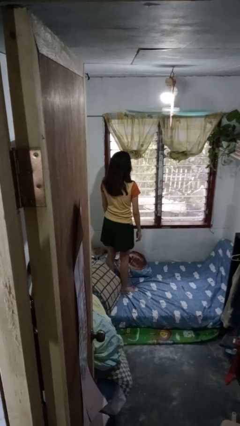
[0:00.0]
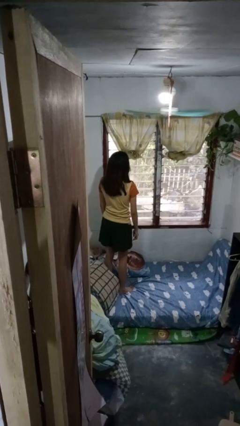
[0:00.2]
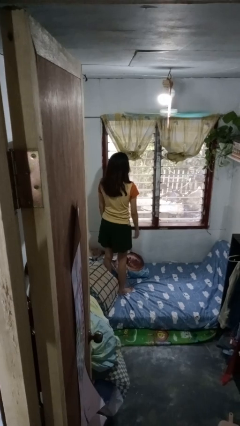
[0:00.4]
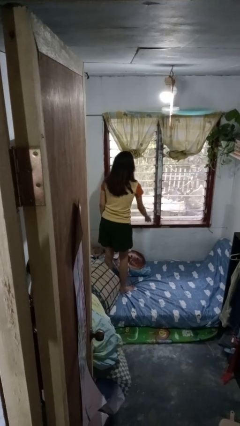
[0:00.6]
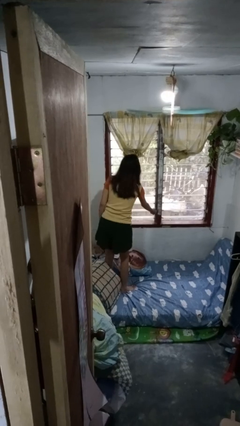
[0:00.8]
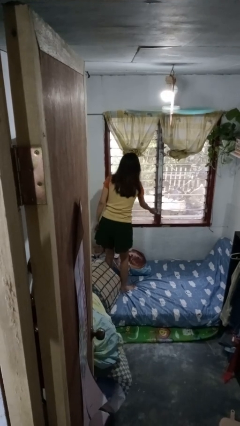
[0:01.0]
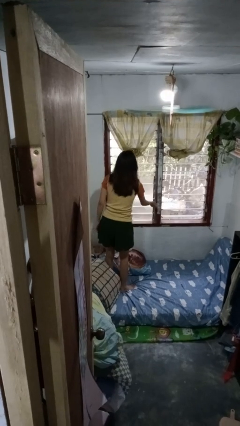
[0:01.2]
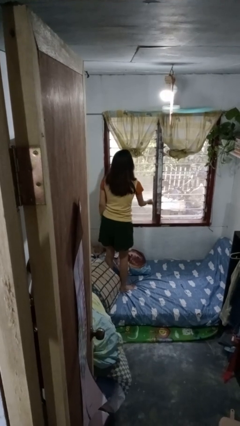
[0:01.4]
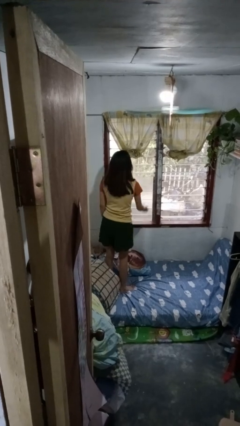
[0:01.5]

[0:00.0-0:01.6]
person closes home window

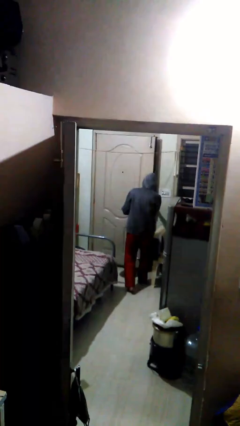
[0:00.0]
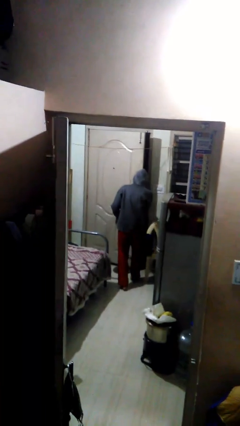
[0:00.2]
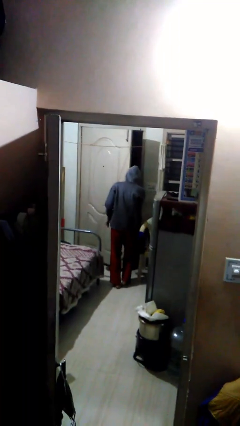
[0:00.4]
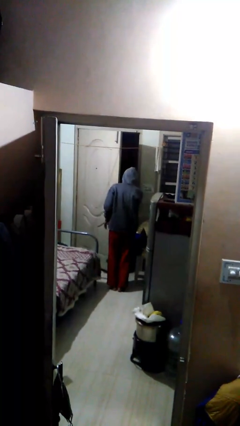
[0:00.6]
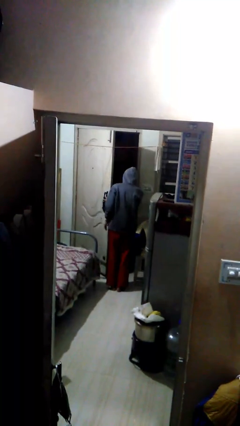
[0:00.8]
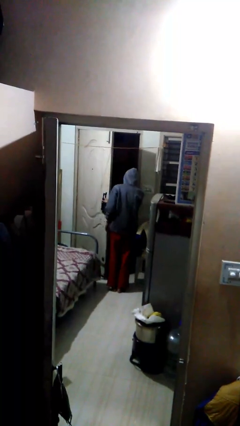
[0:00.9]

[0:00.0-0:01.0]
person opens facility door

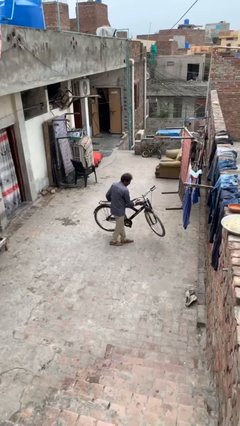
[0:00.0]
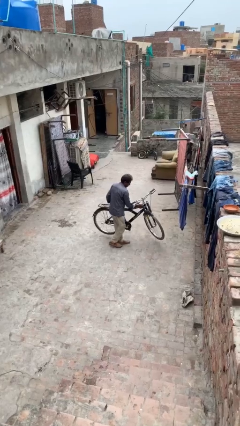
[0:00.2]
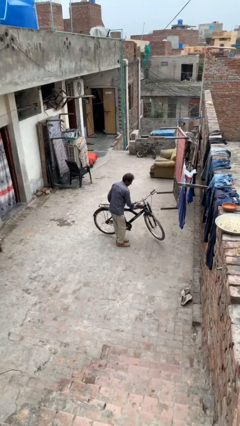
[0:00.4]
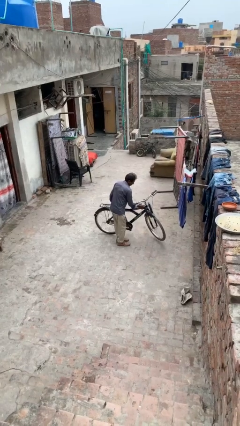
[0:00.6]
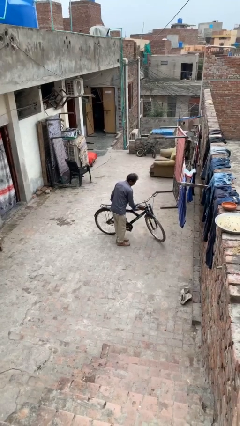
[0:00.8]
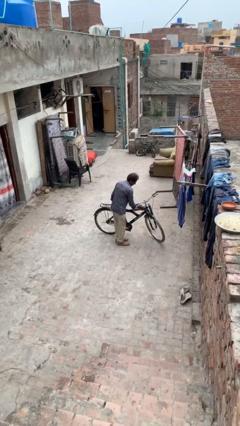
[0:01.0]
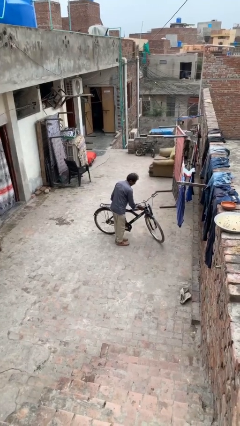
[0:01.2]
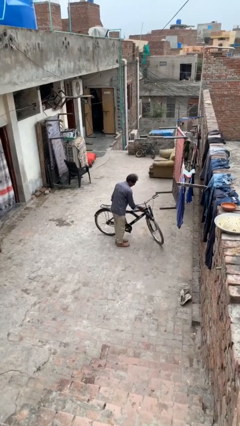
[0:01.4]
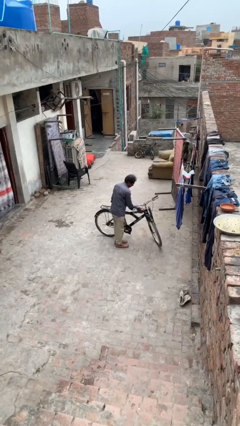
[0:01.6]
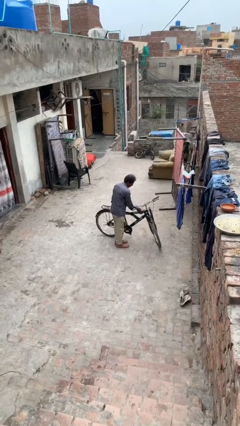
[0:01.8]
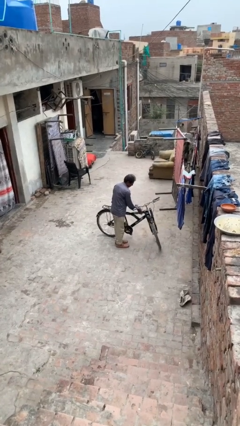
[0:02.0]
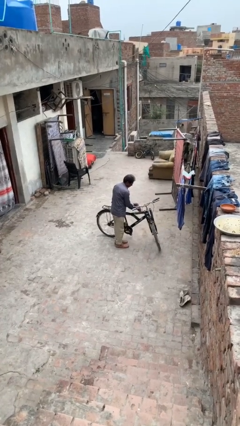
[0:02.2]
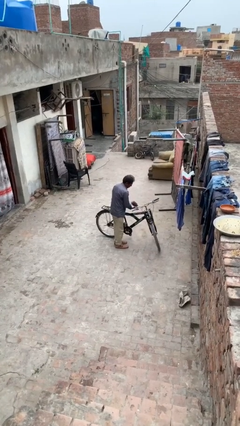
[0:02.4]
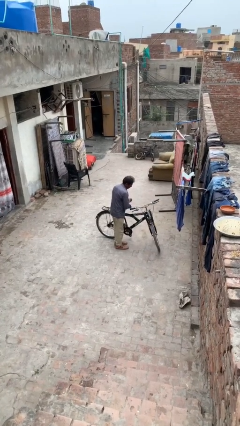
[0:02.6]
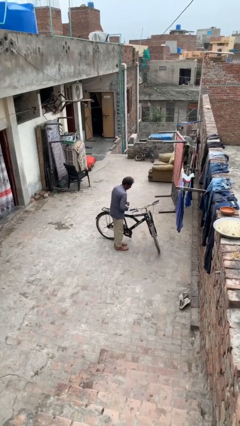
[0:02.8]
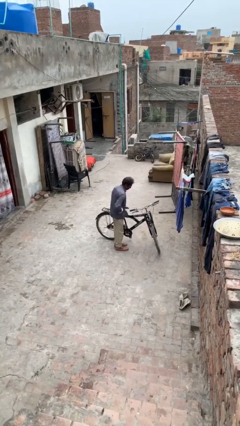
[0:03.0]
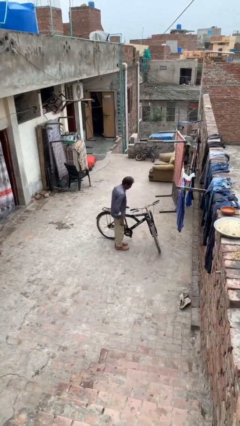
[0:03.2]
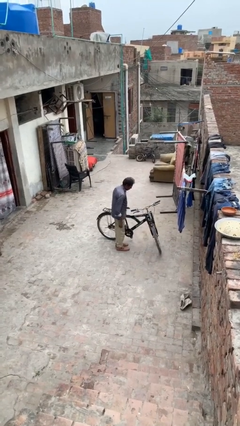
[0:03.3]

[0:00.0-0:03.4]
person puts down object on floor

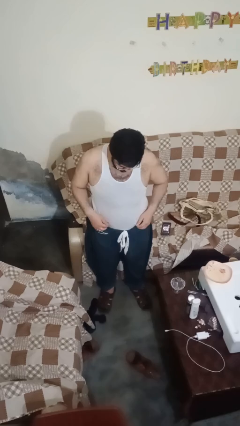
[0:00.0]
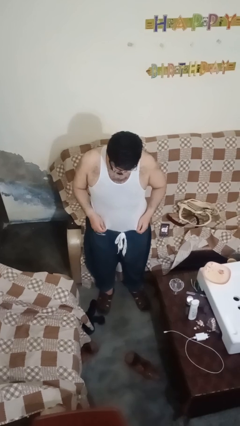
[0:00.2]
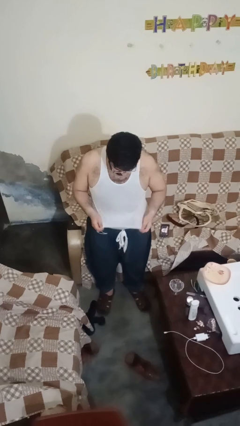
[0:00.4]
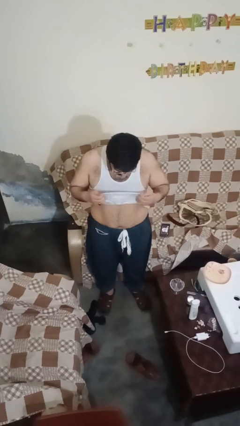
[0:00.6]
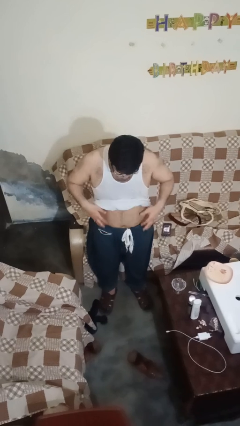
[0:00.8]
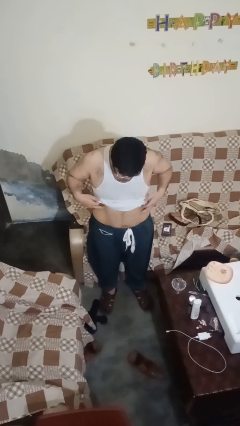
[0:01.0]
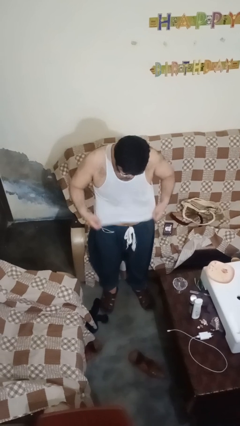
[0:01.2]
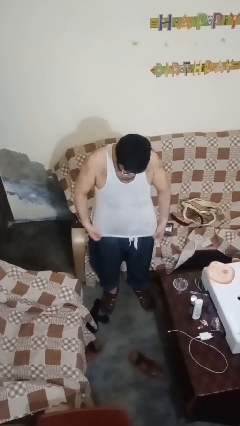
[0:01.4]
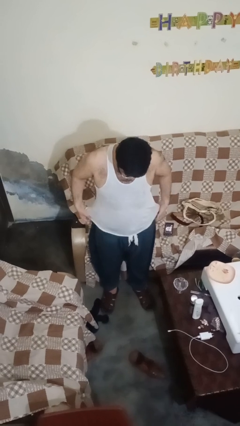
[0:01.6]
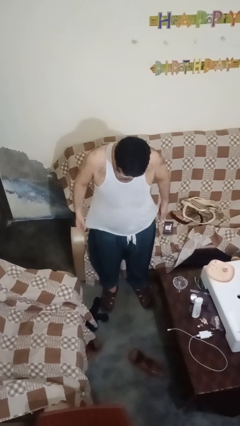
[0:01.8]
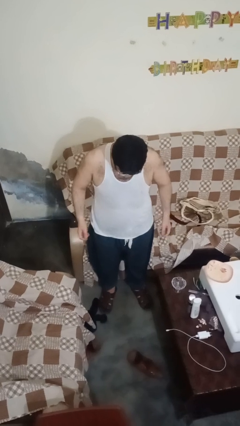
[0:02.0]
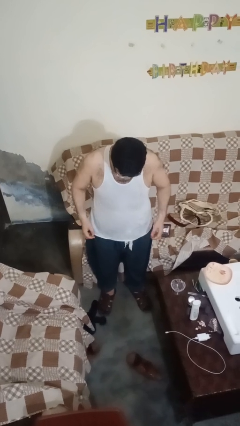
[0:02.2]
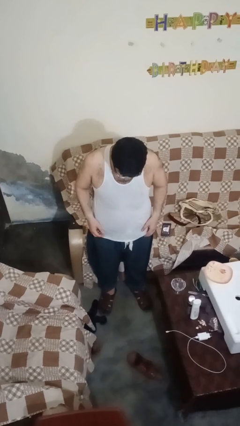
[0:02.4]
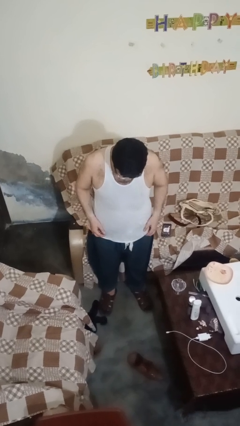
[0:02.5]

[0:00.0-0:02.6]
person untucks shirt

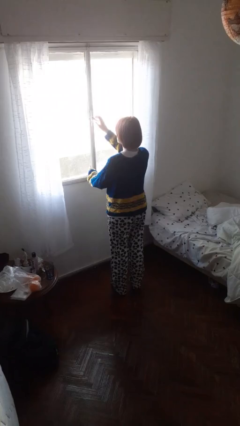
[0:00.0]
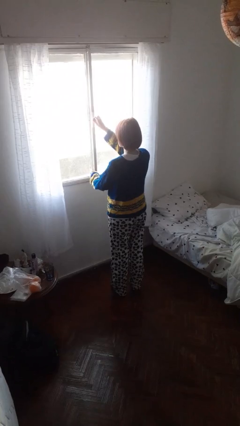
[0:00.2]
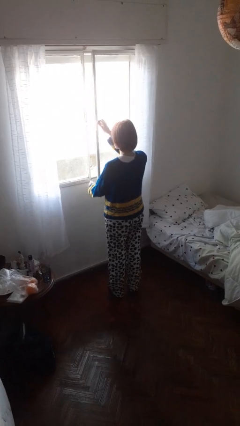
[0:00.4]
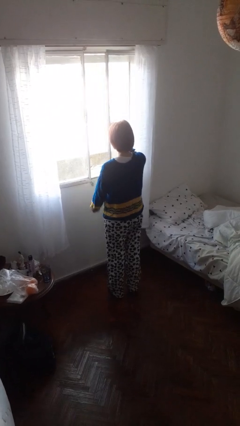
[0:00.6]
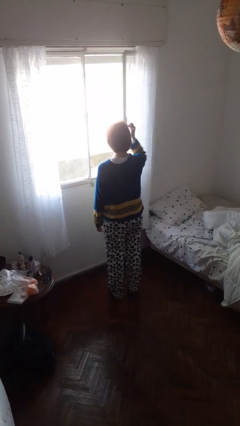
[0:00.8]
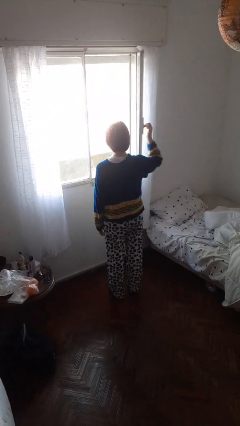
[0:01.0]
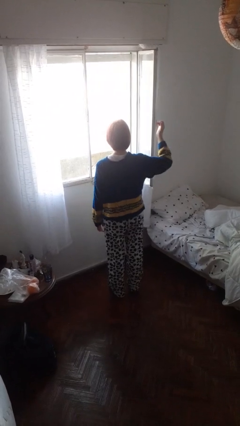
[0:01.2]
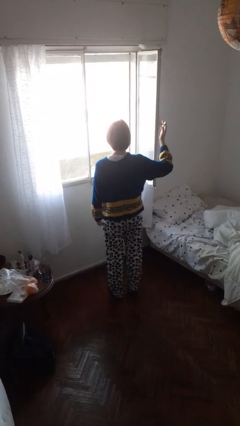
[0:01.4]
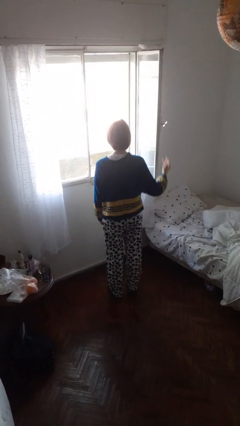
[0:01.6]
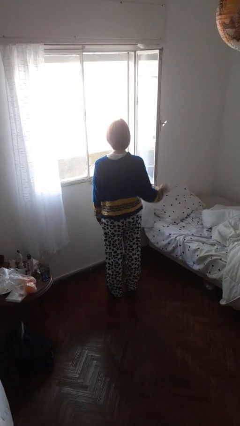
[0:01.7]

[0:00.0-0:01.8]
person opens home window

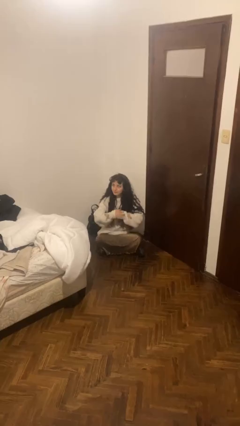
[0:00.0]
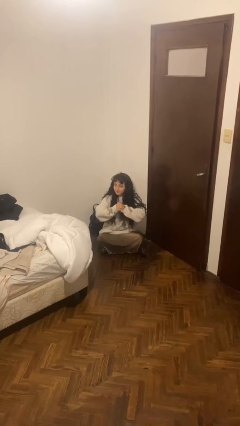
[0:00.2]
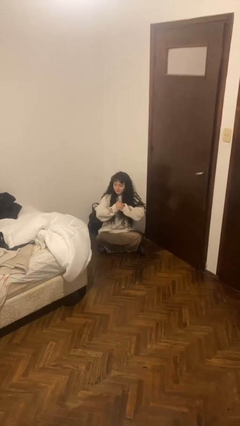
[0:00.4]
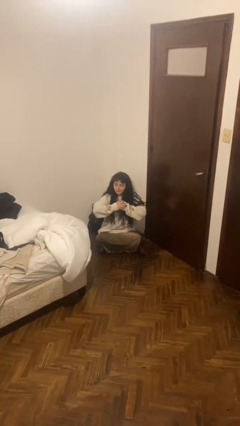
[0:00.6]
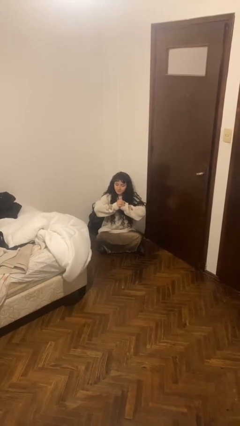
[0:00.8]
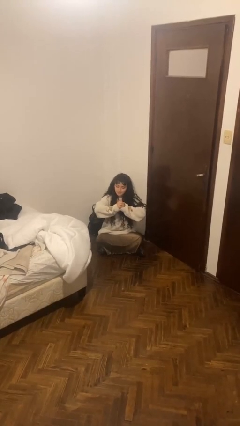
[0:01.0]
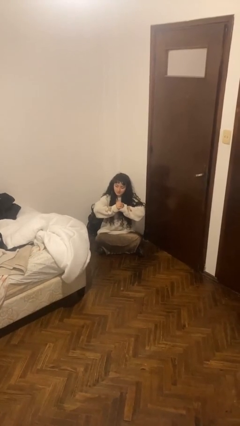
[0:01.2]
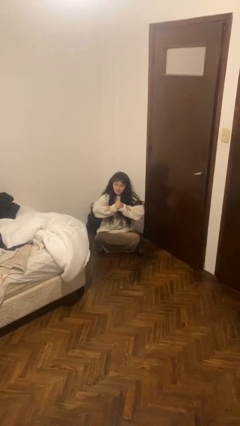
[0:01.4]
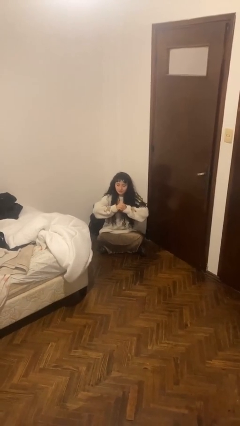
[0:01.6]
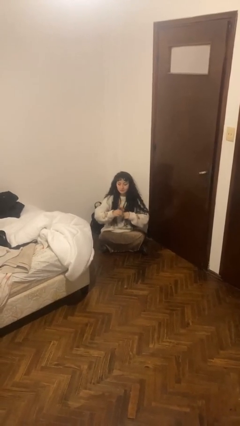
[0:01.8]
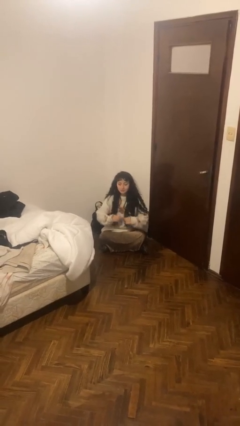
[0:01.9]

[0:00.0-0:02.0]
person cracks knuckles

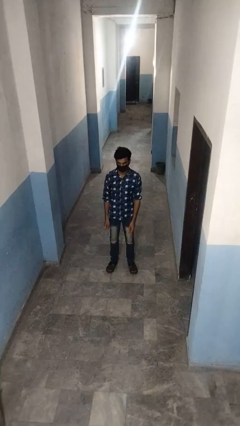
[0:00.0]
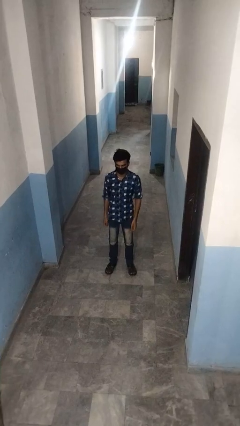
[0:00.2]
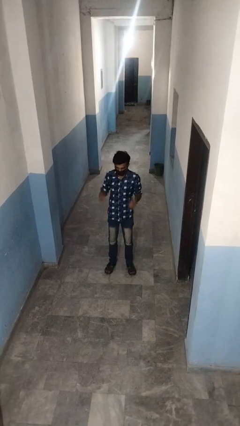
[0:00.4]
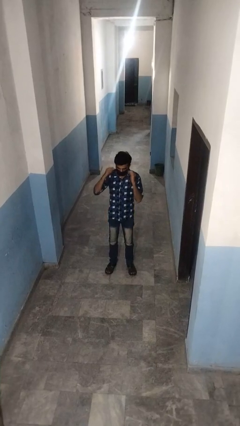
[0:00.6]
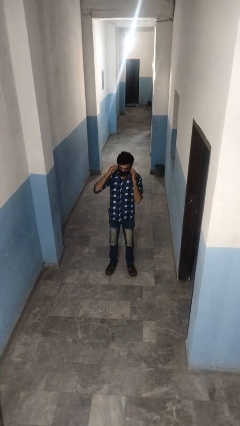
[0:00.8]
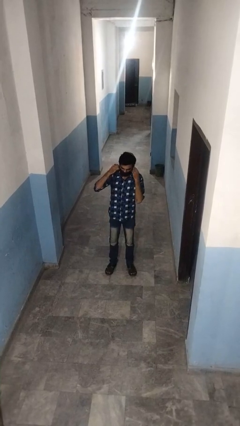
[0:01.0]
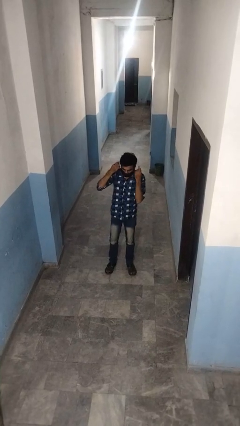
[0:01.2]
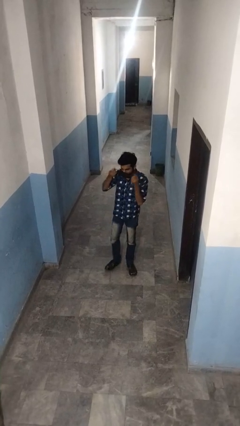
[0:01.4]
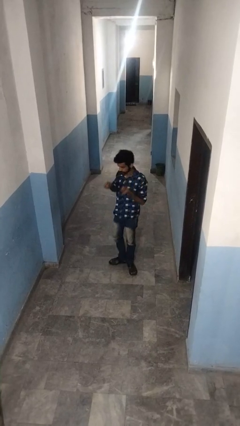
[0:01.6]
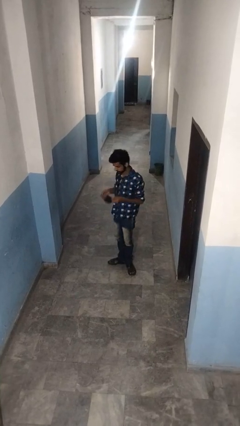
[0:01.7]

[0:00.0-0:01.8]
person takes off facemask

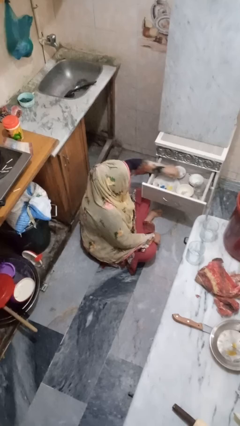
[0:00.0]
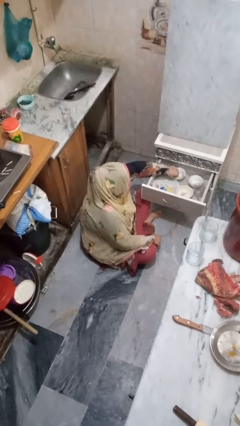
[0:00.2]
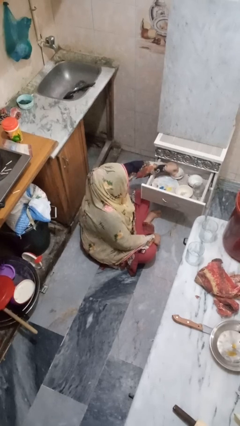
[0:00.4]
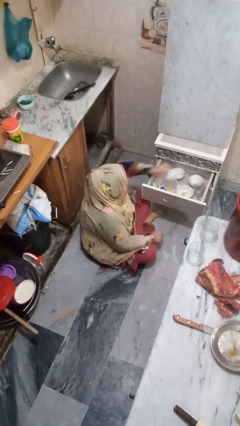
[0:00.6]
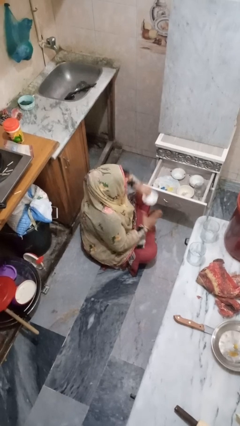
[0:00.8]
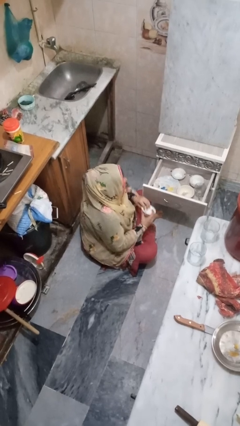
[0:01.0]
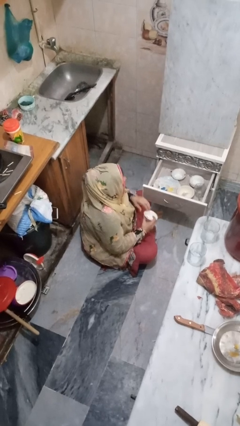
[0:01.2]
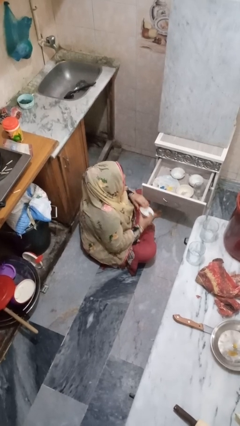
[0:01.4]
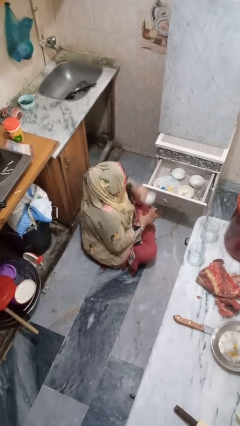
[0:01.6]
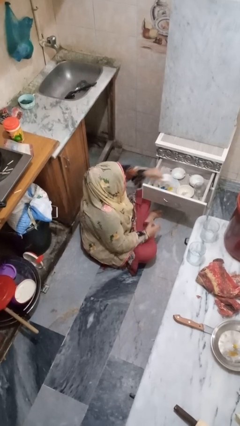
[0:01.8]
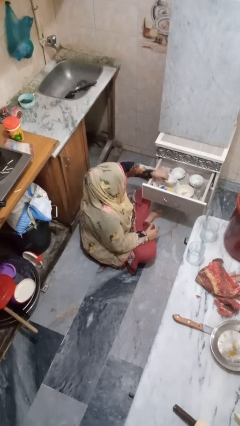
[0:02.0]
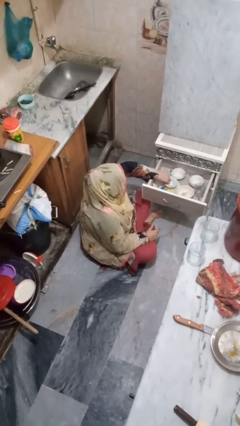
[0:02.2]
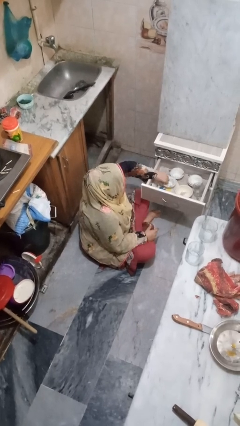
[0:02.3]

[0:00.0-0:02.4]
person puts object into kitchen drawer
